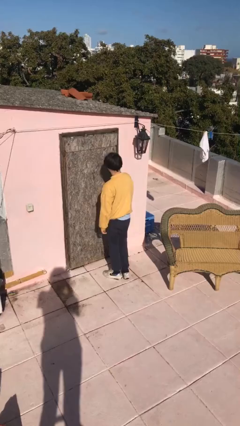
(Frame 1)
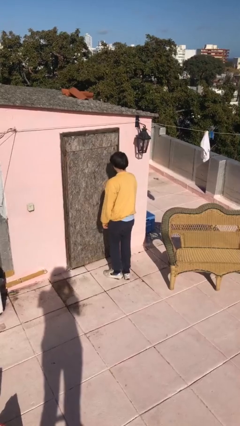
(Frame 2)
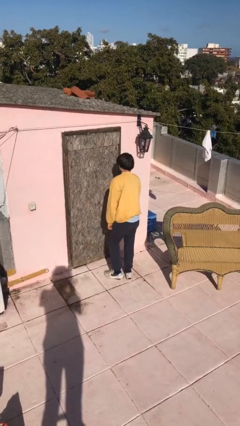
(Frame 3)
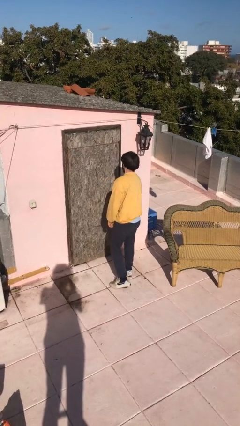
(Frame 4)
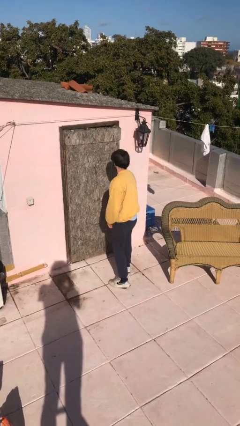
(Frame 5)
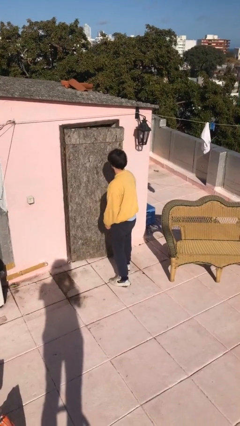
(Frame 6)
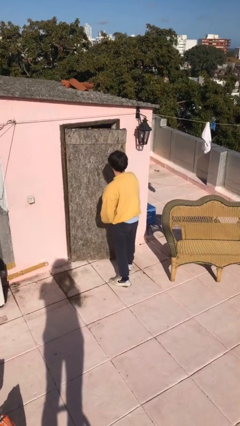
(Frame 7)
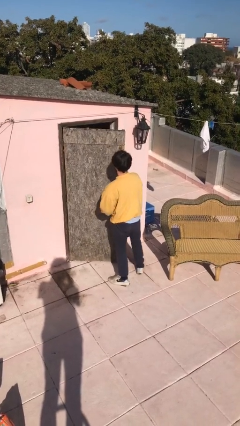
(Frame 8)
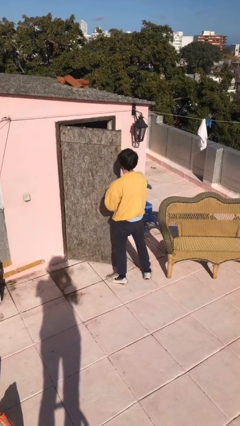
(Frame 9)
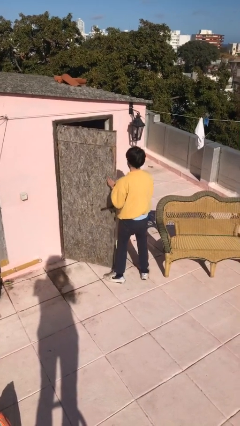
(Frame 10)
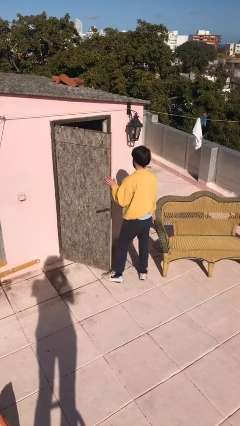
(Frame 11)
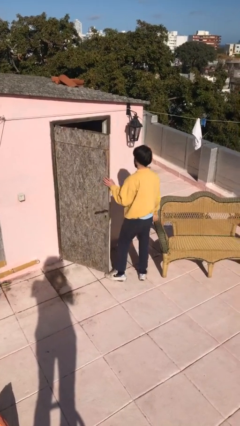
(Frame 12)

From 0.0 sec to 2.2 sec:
person opens facility door

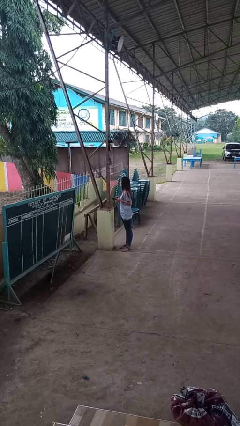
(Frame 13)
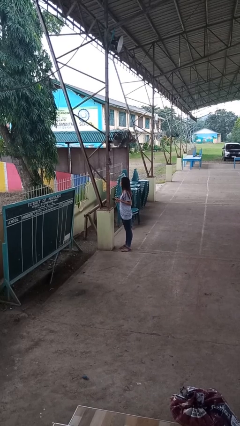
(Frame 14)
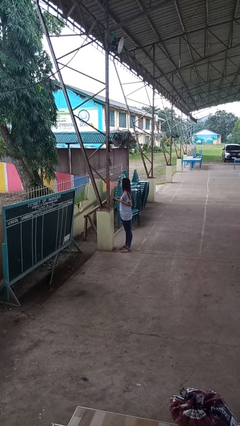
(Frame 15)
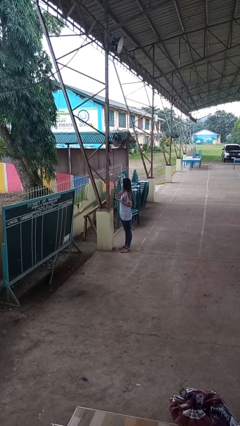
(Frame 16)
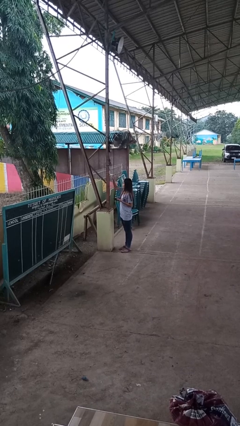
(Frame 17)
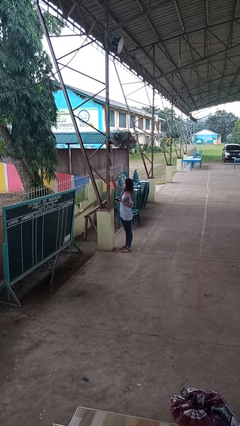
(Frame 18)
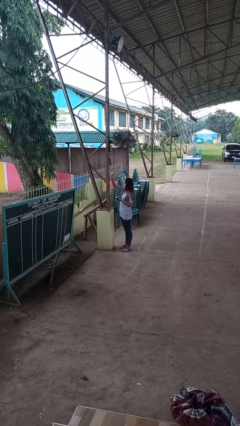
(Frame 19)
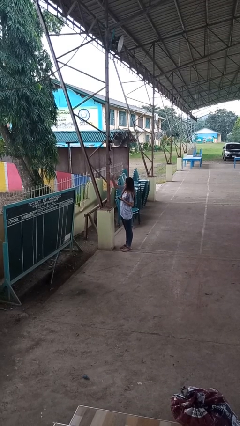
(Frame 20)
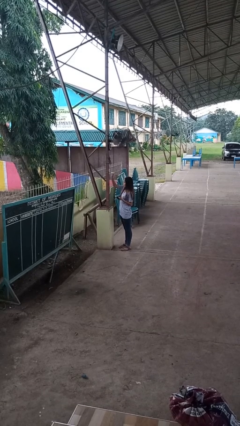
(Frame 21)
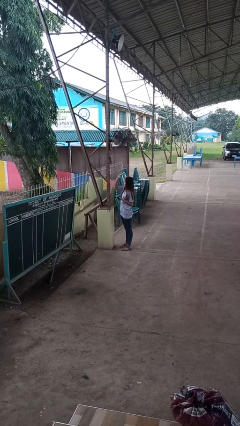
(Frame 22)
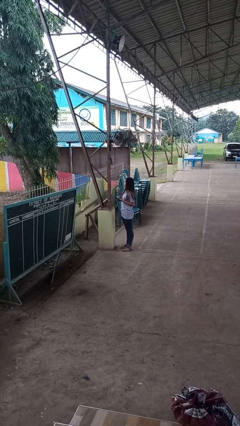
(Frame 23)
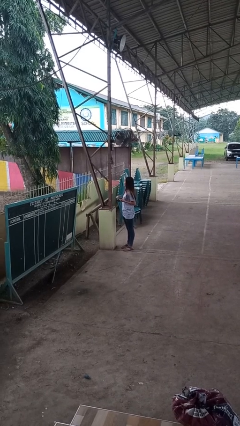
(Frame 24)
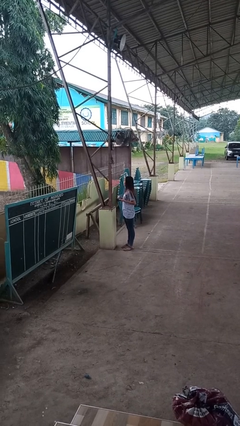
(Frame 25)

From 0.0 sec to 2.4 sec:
person unplugs from electrical socket

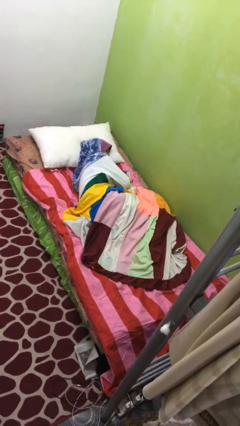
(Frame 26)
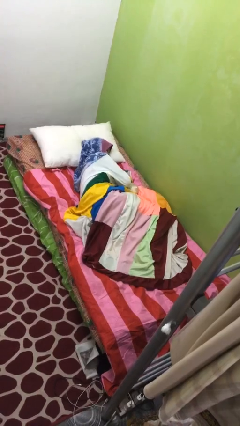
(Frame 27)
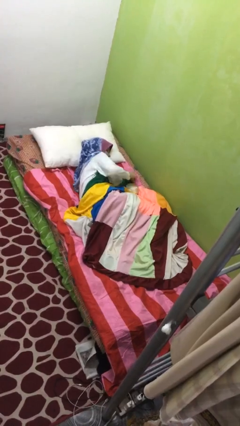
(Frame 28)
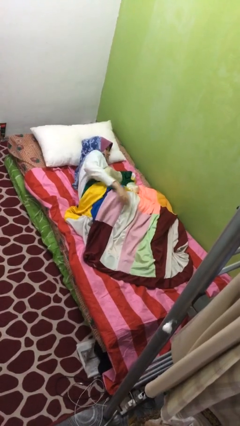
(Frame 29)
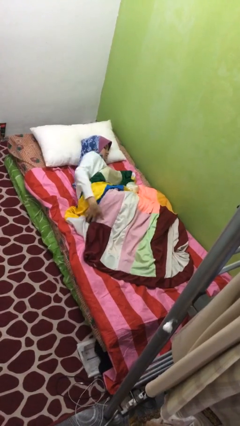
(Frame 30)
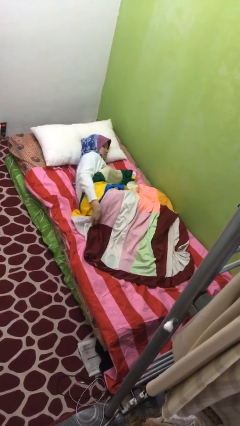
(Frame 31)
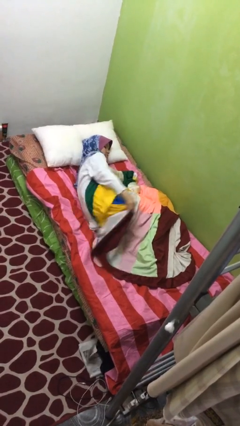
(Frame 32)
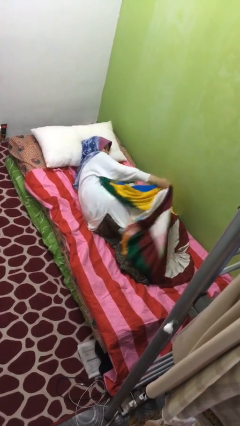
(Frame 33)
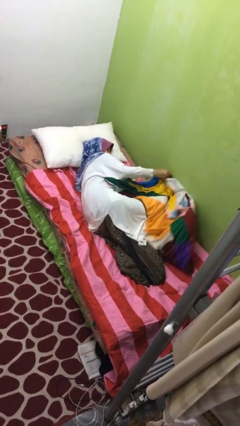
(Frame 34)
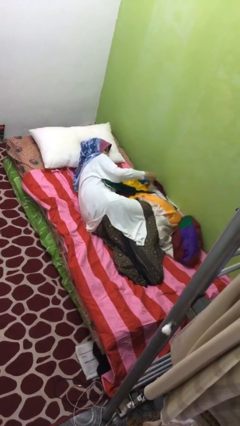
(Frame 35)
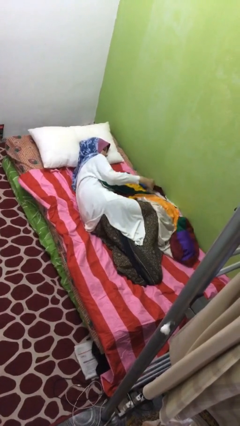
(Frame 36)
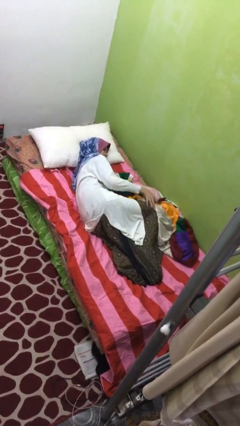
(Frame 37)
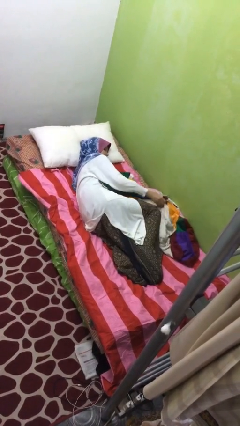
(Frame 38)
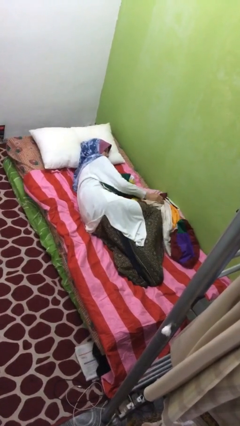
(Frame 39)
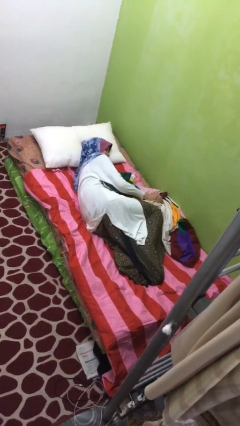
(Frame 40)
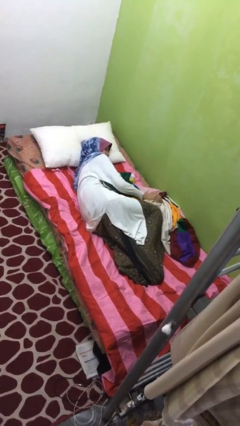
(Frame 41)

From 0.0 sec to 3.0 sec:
person uncovers with blanket

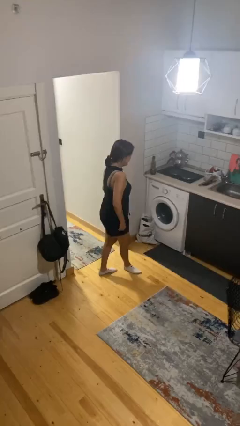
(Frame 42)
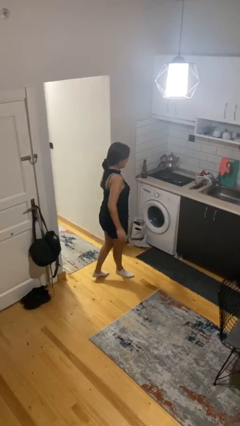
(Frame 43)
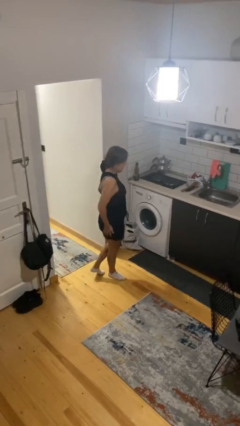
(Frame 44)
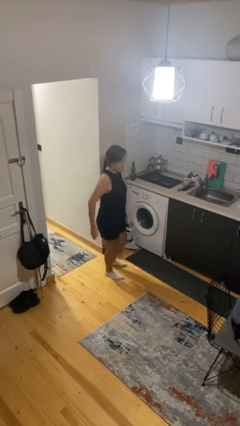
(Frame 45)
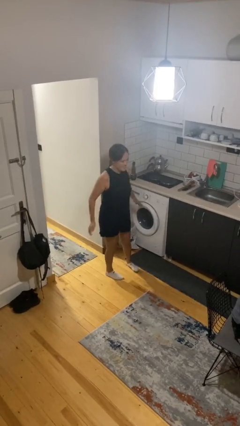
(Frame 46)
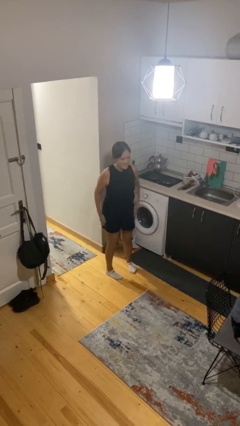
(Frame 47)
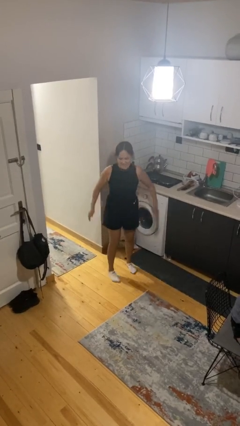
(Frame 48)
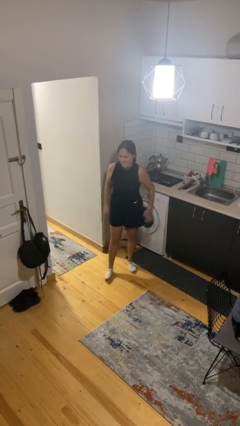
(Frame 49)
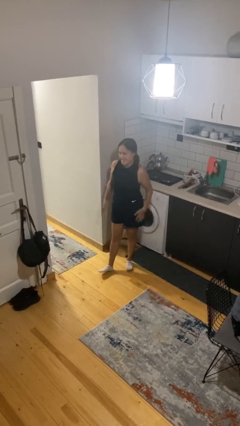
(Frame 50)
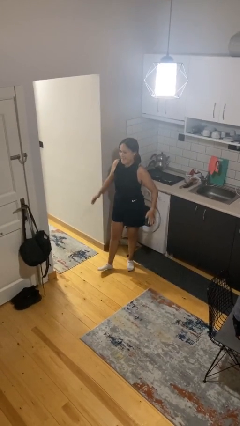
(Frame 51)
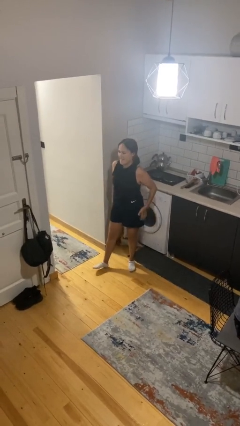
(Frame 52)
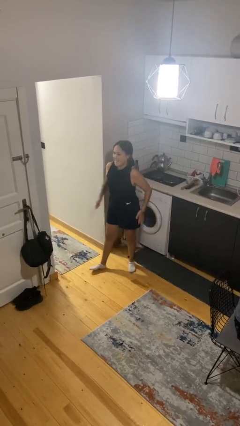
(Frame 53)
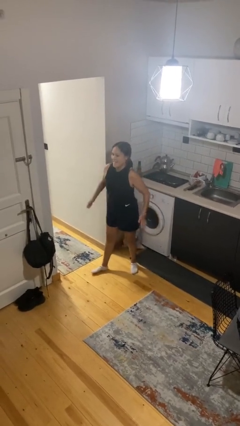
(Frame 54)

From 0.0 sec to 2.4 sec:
person slaps hands on thighs

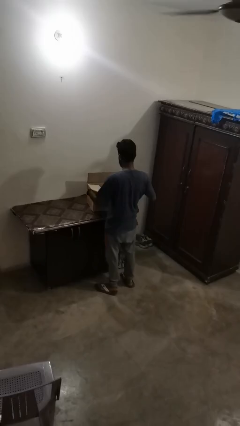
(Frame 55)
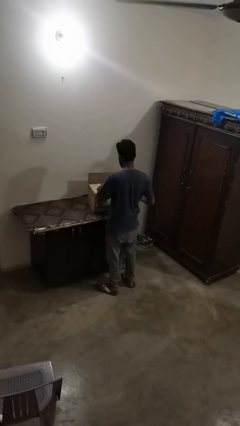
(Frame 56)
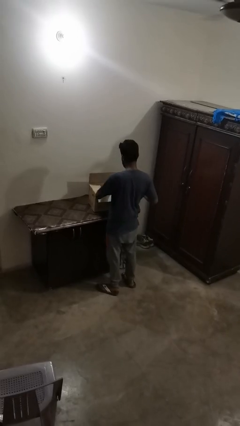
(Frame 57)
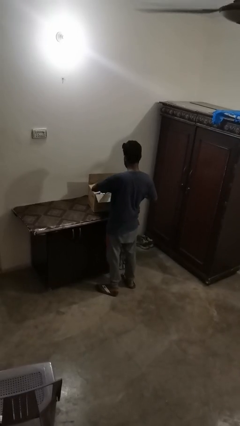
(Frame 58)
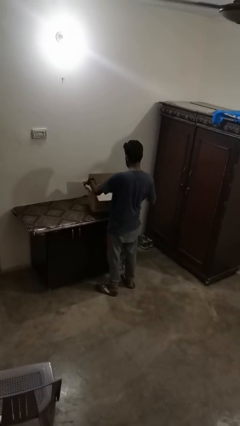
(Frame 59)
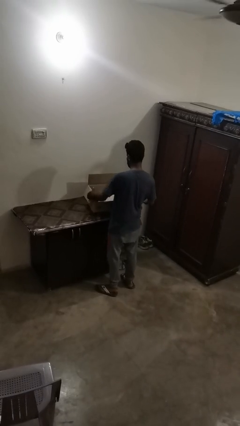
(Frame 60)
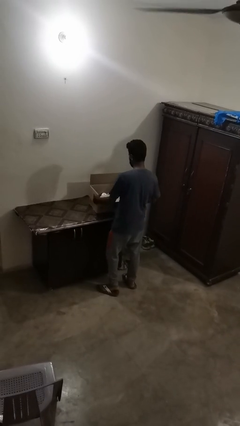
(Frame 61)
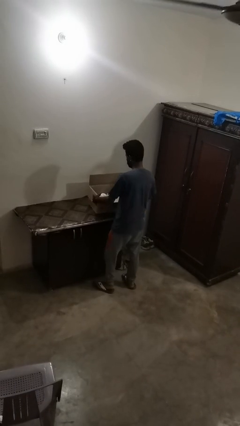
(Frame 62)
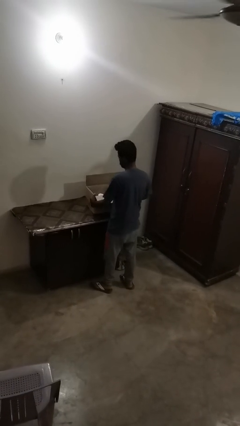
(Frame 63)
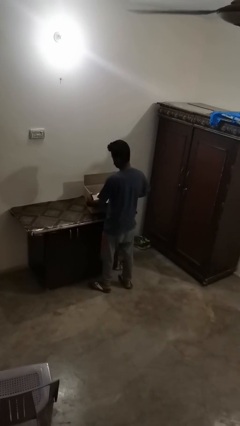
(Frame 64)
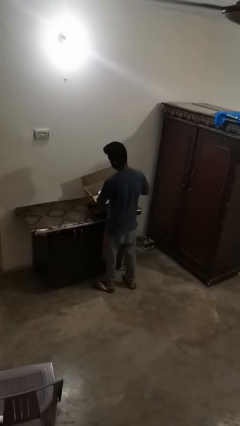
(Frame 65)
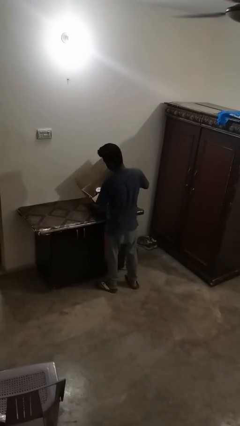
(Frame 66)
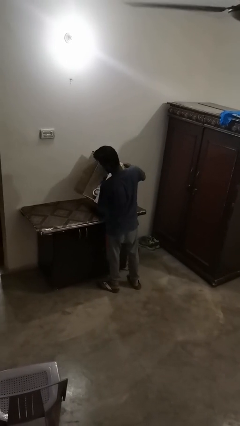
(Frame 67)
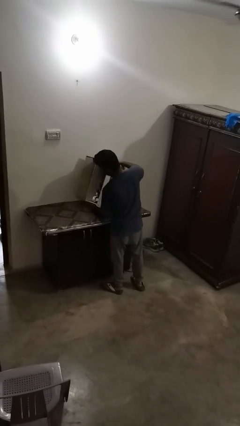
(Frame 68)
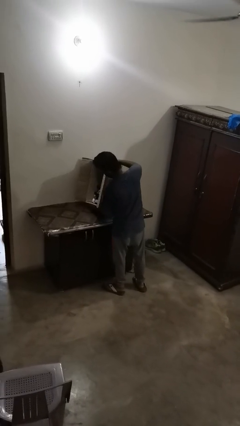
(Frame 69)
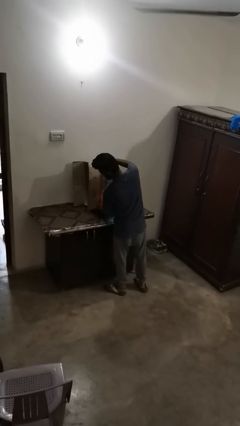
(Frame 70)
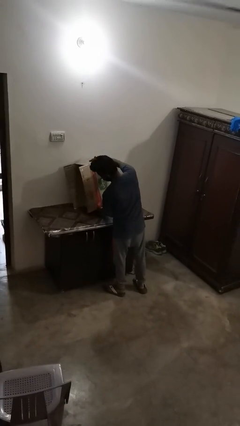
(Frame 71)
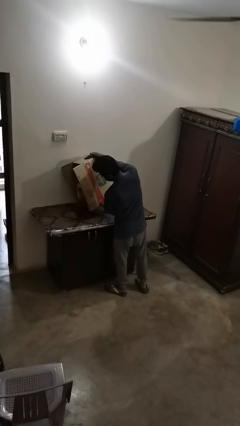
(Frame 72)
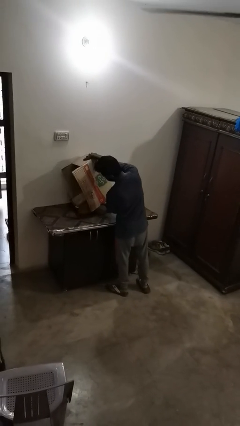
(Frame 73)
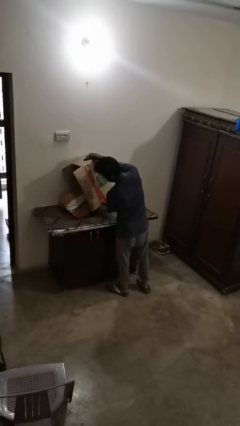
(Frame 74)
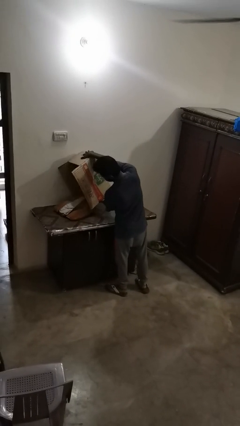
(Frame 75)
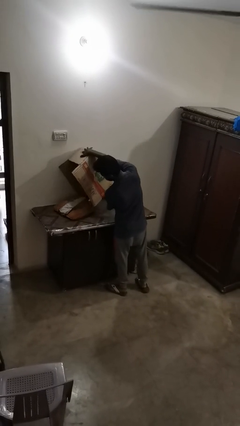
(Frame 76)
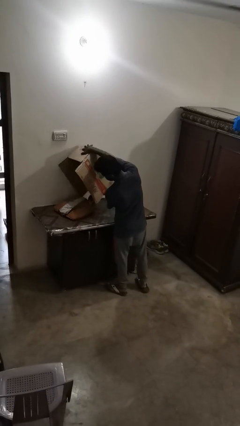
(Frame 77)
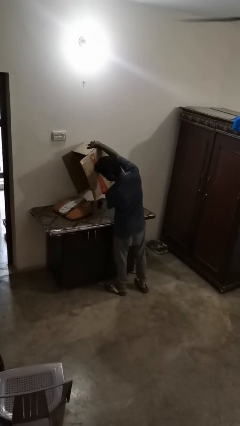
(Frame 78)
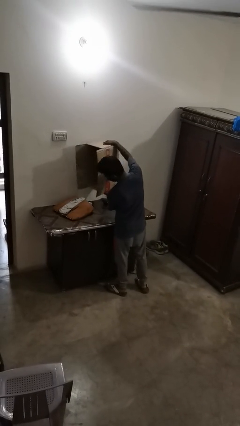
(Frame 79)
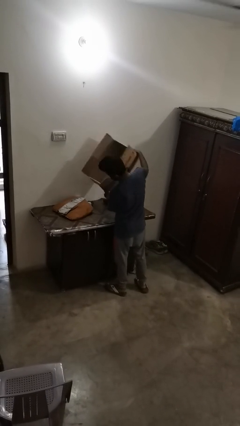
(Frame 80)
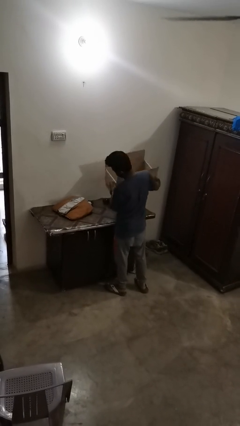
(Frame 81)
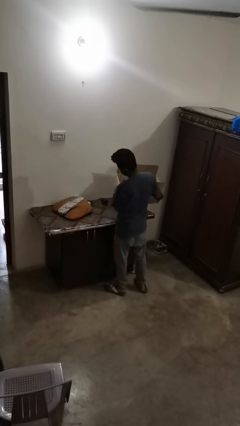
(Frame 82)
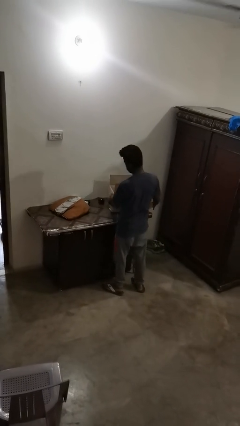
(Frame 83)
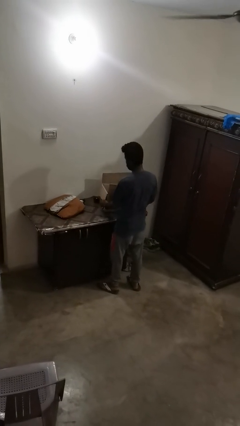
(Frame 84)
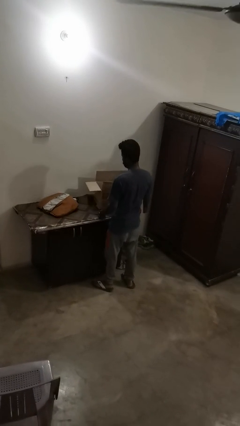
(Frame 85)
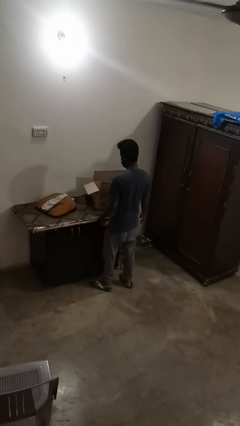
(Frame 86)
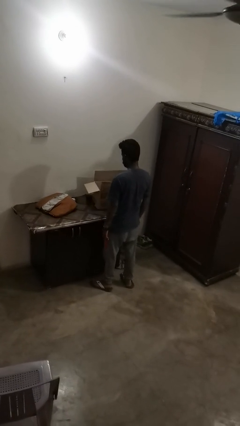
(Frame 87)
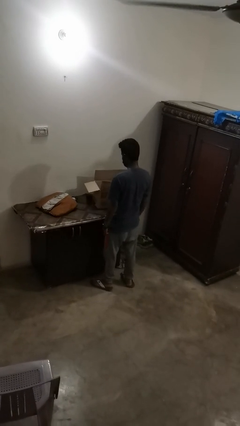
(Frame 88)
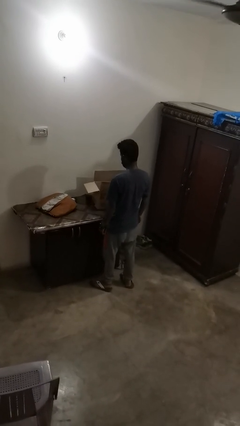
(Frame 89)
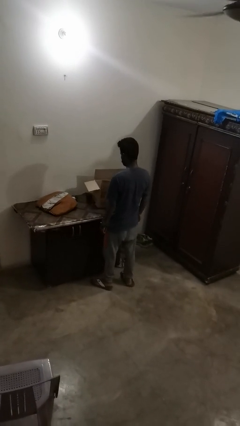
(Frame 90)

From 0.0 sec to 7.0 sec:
person unloads box onto table

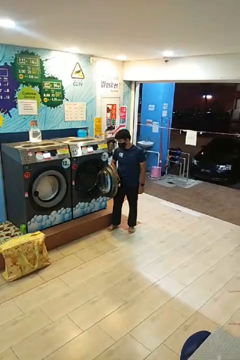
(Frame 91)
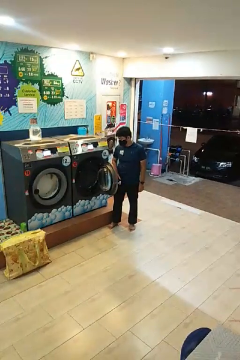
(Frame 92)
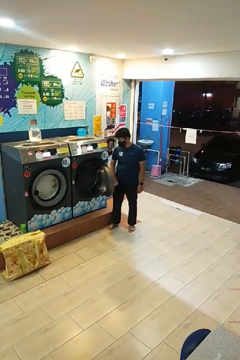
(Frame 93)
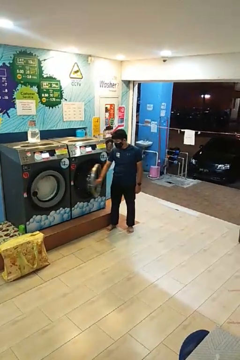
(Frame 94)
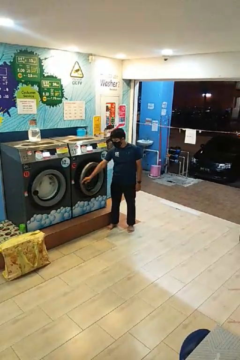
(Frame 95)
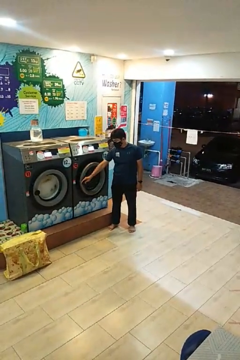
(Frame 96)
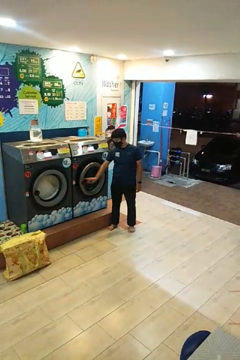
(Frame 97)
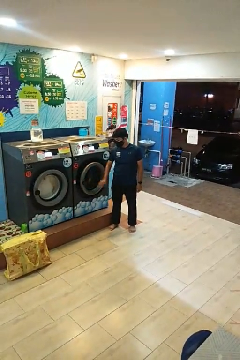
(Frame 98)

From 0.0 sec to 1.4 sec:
person closes clothes washer
